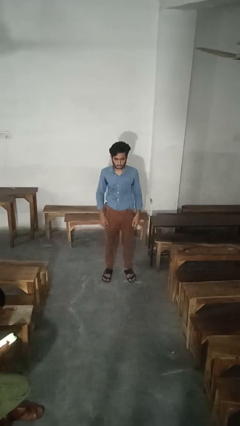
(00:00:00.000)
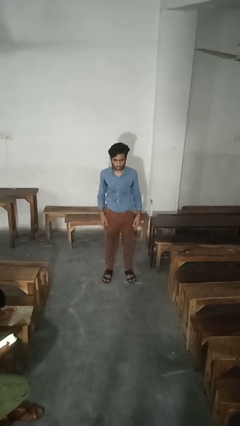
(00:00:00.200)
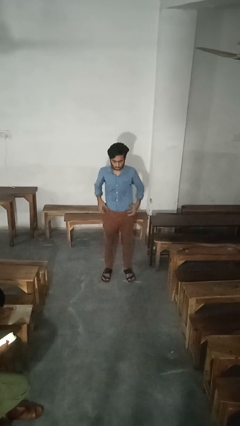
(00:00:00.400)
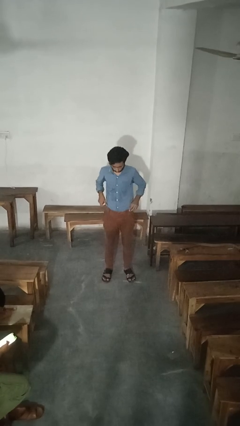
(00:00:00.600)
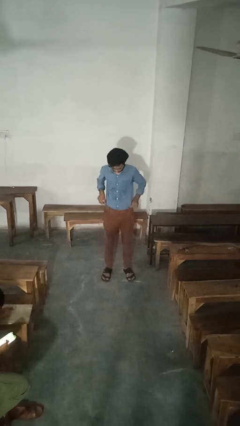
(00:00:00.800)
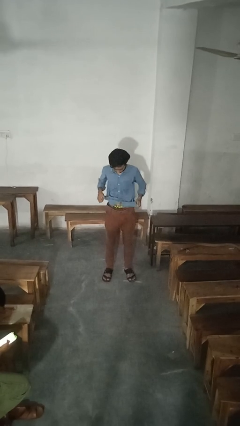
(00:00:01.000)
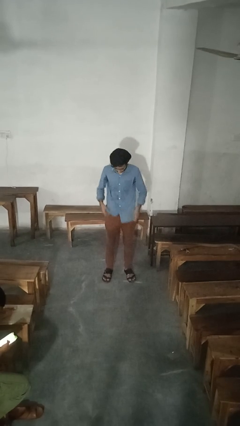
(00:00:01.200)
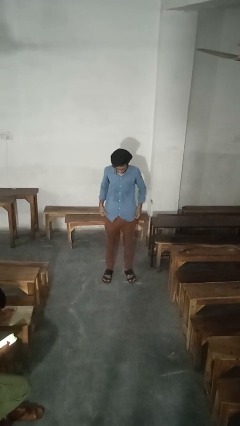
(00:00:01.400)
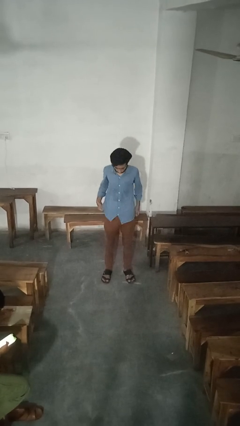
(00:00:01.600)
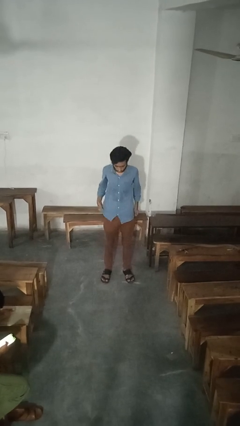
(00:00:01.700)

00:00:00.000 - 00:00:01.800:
person untucks shirt

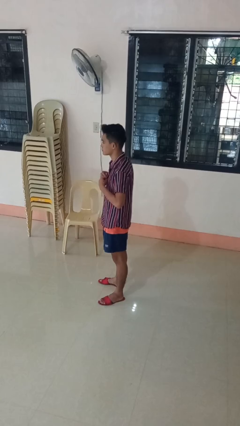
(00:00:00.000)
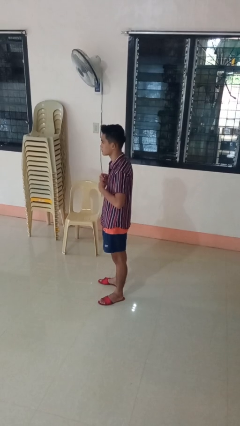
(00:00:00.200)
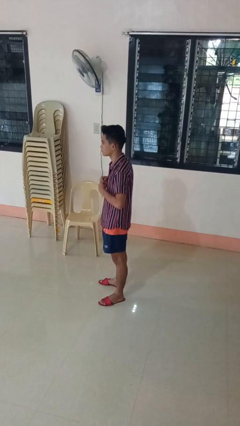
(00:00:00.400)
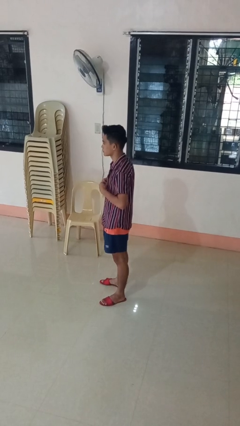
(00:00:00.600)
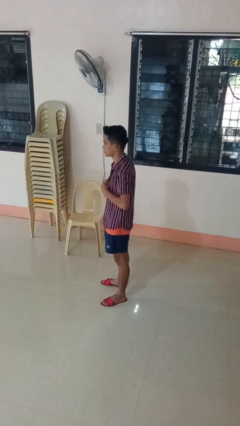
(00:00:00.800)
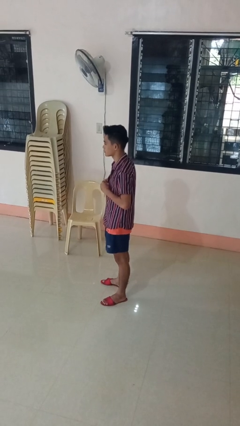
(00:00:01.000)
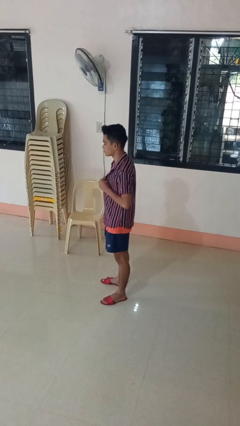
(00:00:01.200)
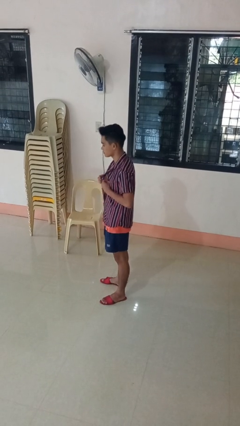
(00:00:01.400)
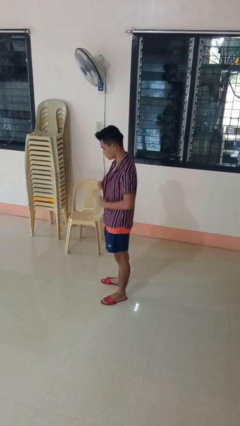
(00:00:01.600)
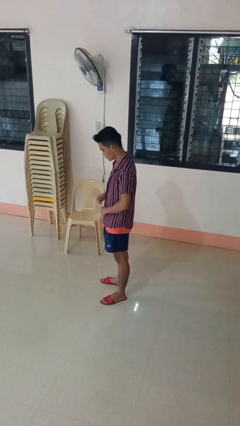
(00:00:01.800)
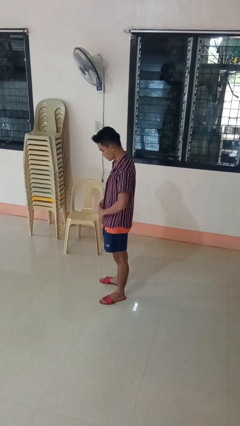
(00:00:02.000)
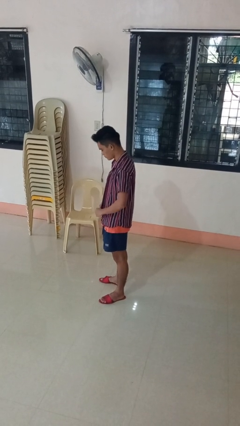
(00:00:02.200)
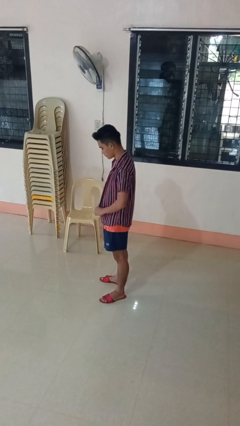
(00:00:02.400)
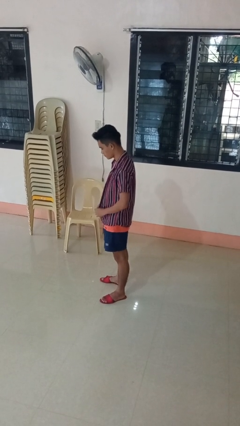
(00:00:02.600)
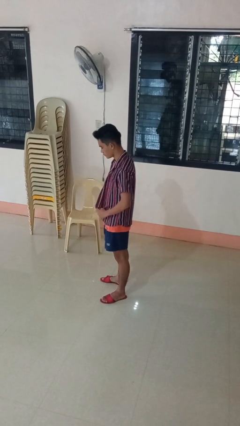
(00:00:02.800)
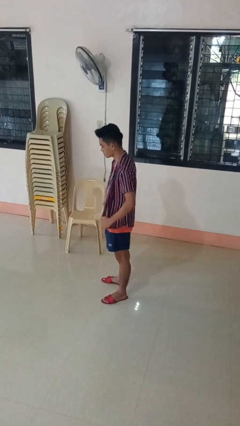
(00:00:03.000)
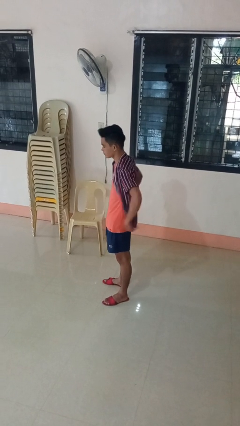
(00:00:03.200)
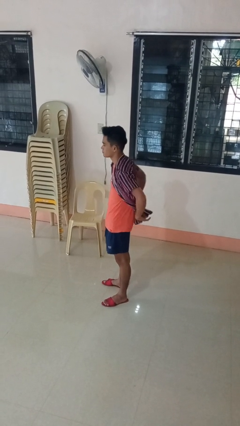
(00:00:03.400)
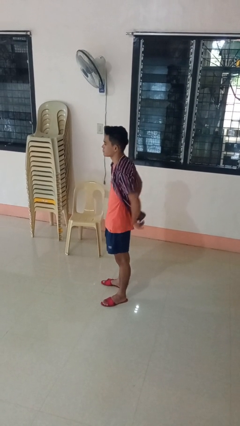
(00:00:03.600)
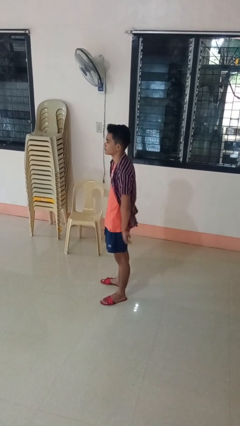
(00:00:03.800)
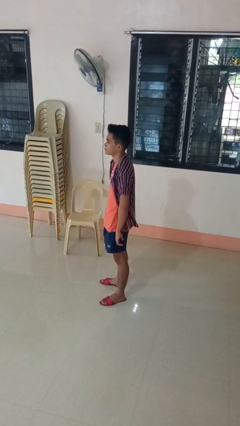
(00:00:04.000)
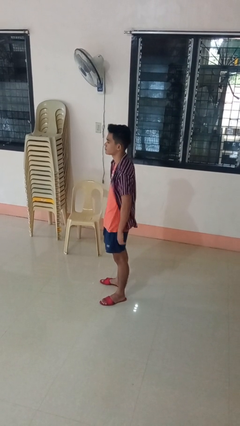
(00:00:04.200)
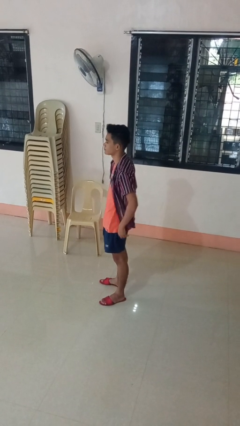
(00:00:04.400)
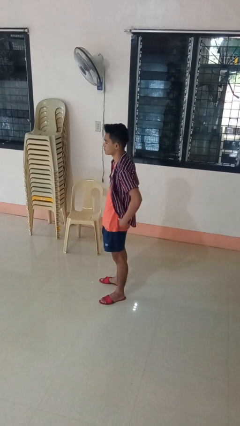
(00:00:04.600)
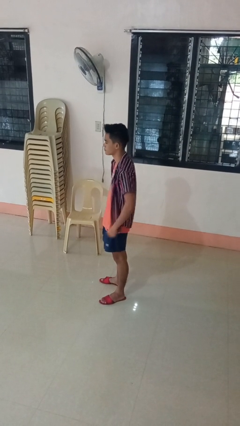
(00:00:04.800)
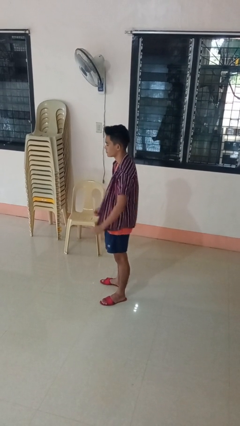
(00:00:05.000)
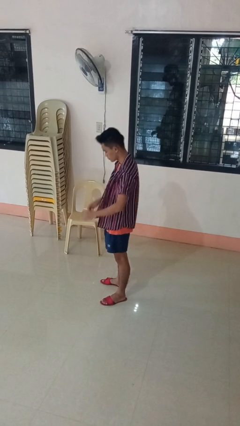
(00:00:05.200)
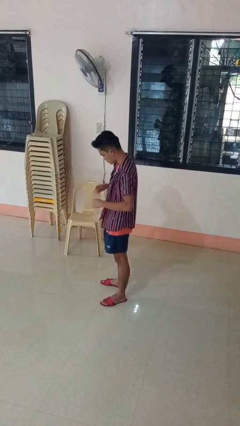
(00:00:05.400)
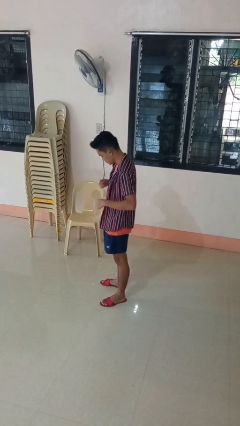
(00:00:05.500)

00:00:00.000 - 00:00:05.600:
person unbuttons shirt

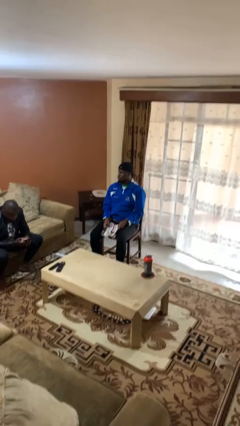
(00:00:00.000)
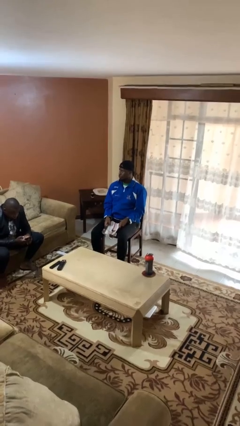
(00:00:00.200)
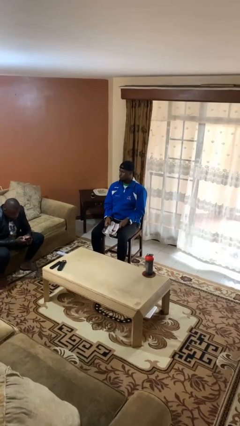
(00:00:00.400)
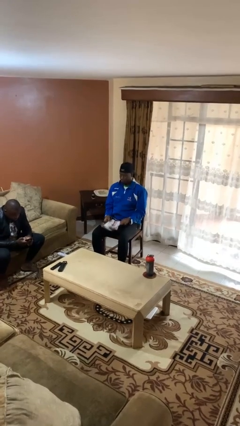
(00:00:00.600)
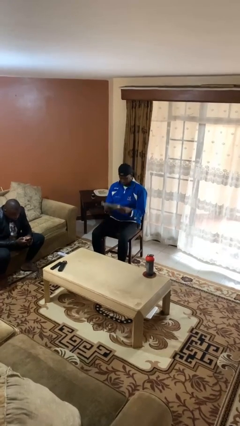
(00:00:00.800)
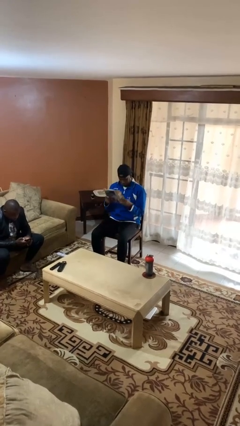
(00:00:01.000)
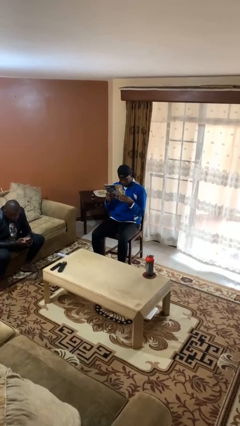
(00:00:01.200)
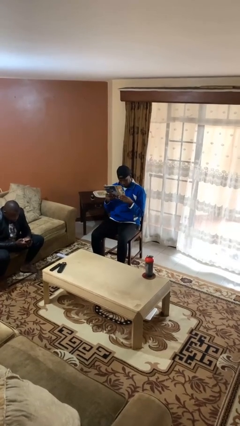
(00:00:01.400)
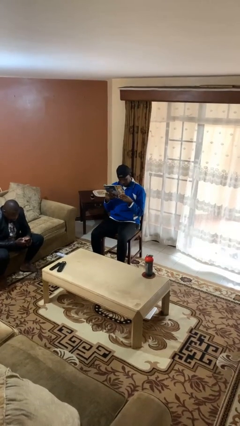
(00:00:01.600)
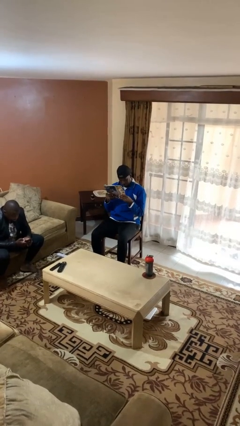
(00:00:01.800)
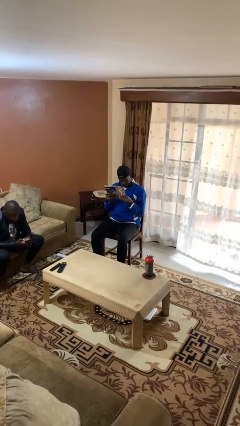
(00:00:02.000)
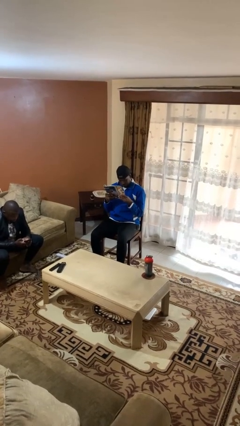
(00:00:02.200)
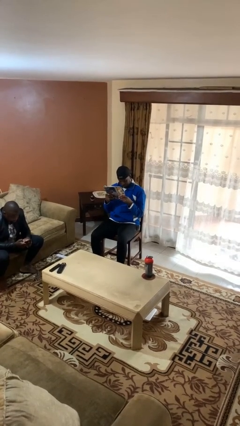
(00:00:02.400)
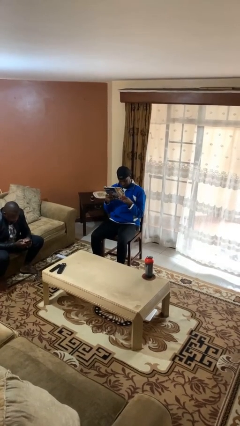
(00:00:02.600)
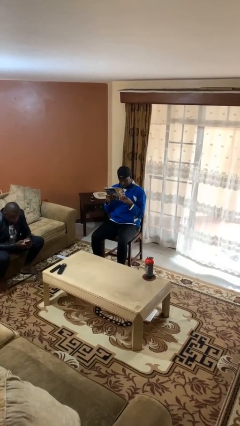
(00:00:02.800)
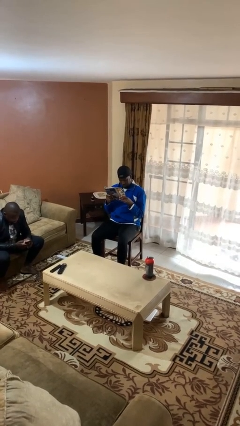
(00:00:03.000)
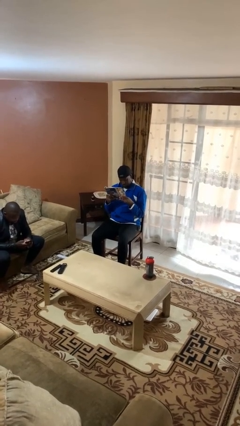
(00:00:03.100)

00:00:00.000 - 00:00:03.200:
person reads document

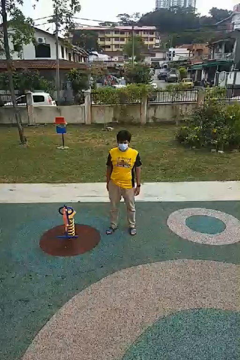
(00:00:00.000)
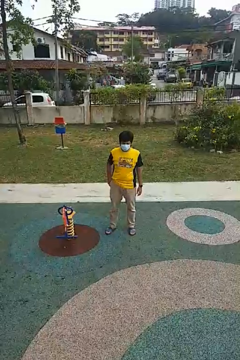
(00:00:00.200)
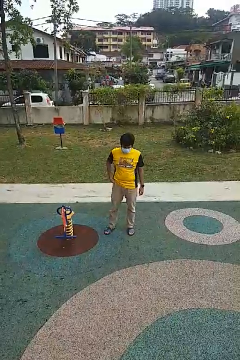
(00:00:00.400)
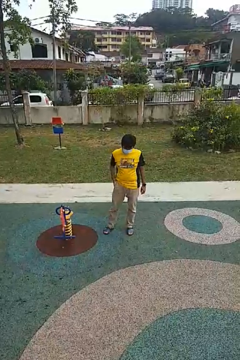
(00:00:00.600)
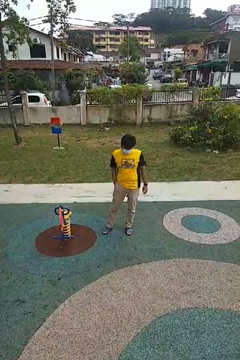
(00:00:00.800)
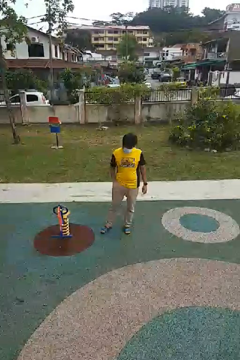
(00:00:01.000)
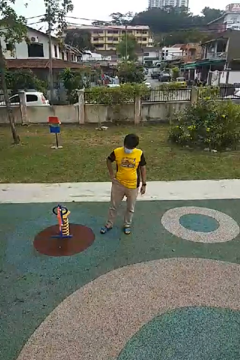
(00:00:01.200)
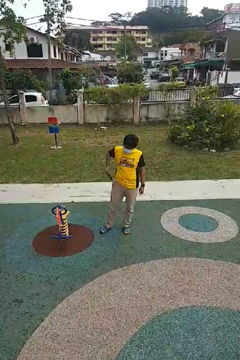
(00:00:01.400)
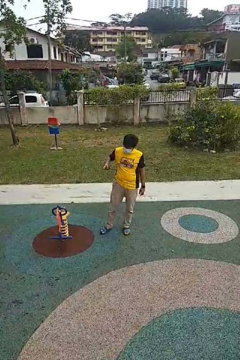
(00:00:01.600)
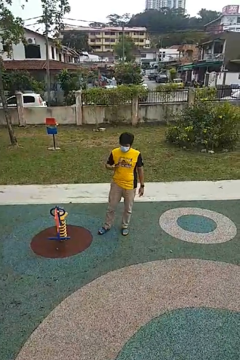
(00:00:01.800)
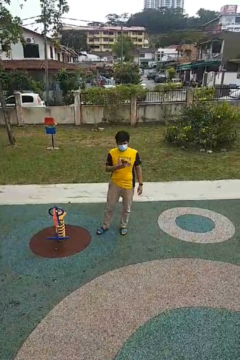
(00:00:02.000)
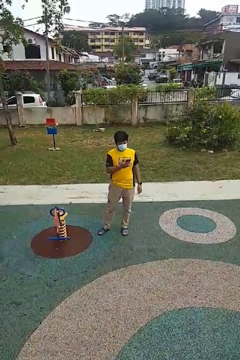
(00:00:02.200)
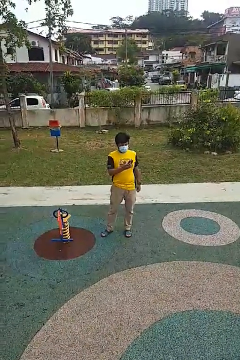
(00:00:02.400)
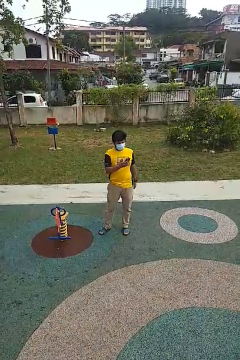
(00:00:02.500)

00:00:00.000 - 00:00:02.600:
person takes phone from pocket

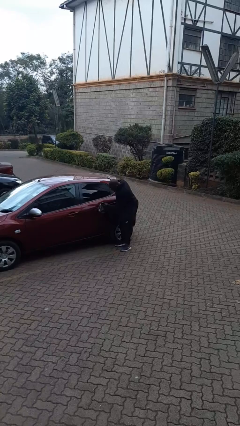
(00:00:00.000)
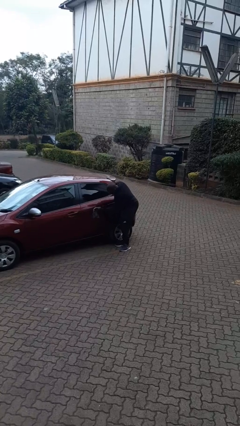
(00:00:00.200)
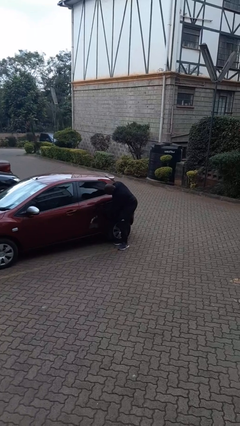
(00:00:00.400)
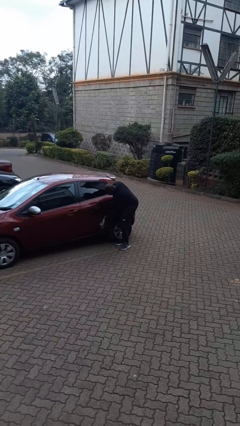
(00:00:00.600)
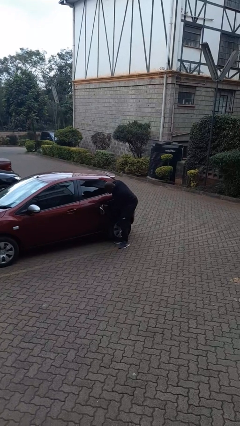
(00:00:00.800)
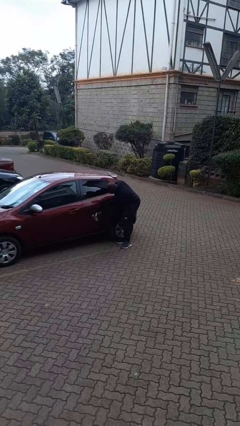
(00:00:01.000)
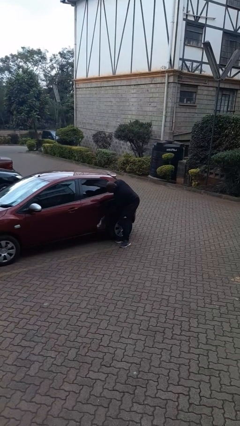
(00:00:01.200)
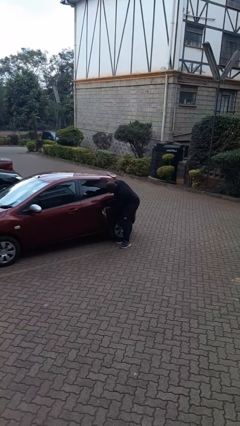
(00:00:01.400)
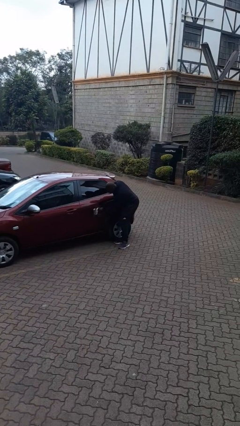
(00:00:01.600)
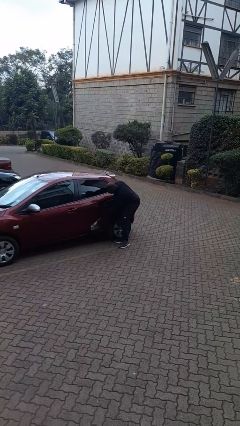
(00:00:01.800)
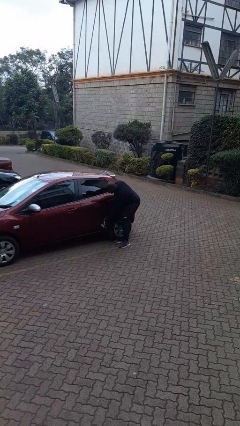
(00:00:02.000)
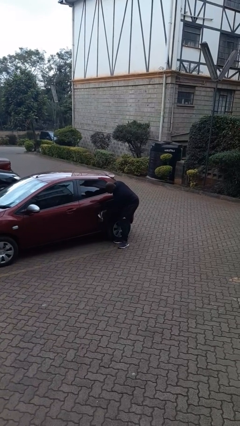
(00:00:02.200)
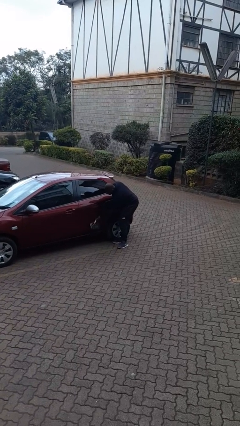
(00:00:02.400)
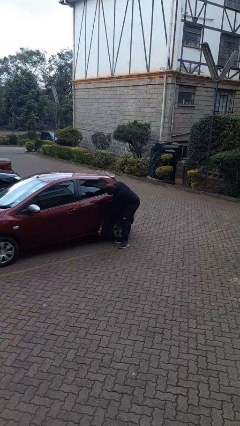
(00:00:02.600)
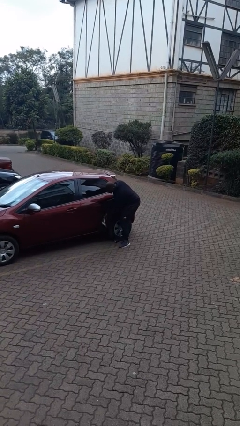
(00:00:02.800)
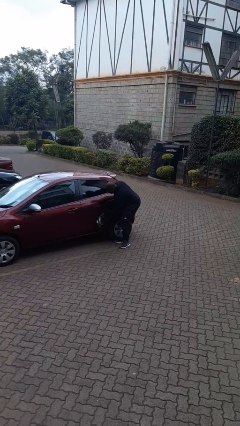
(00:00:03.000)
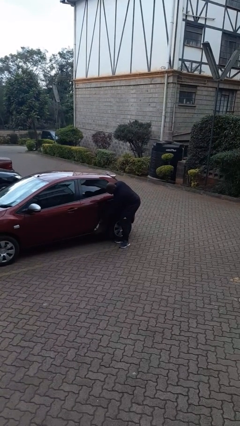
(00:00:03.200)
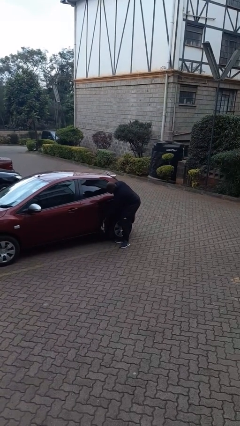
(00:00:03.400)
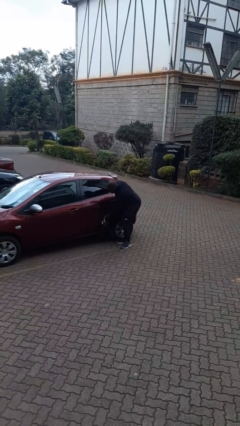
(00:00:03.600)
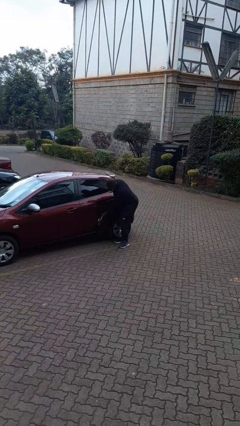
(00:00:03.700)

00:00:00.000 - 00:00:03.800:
person polishes car with rag

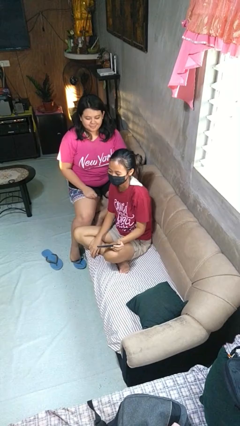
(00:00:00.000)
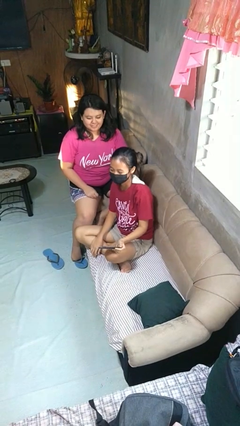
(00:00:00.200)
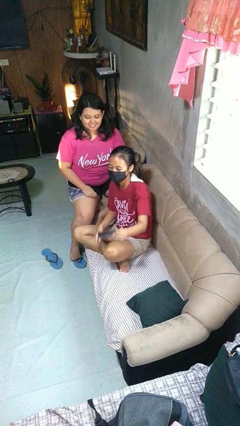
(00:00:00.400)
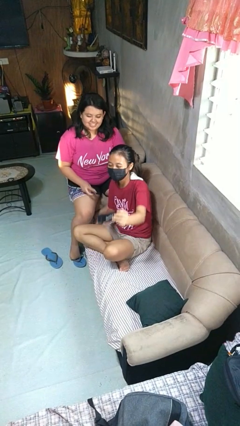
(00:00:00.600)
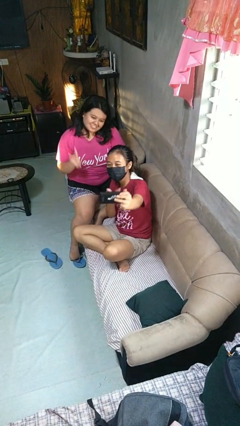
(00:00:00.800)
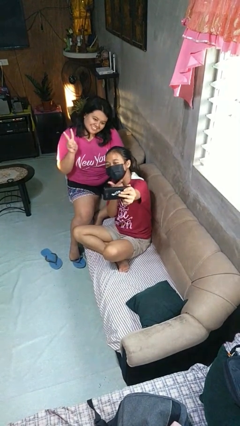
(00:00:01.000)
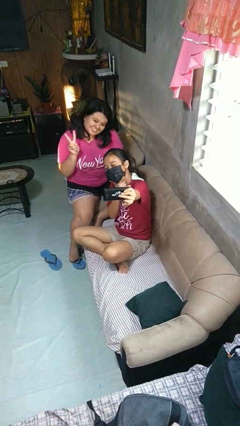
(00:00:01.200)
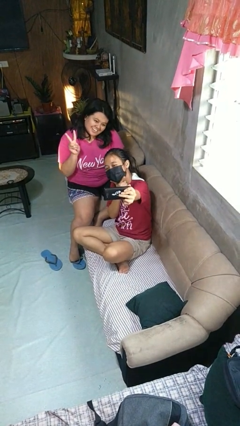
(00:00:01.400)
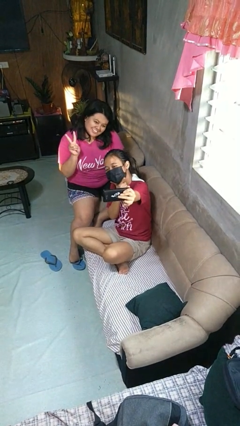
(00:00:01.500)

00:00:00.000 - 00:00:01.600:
person takes selfie with person
